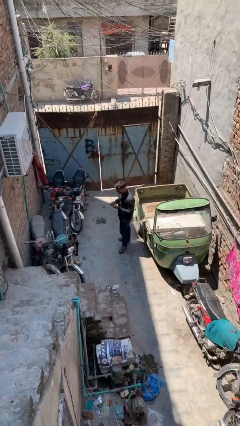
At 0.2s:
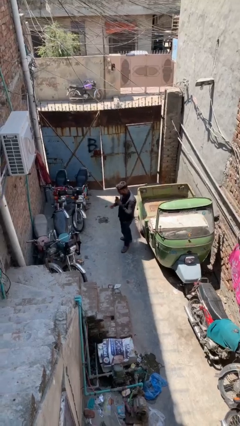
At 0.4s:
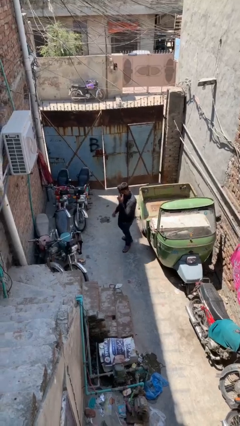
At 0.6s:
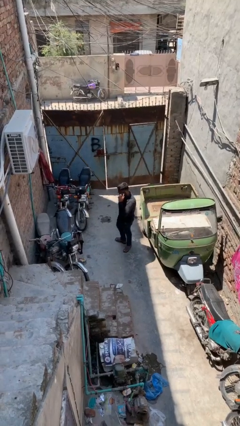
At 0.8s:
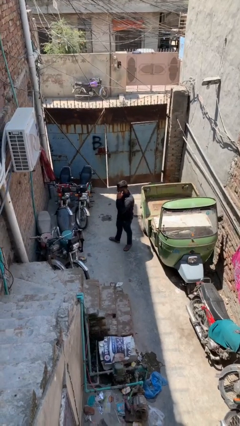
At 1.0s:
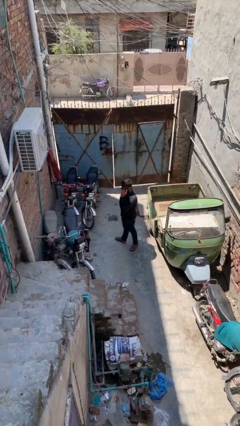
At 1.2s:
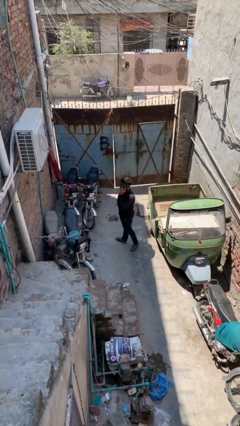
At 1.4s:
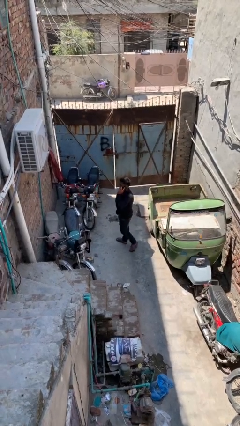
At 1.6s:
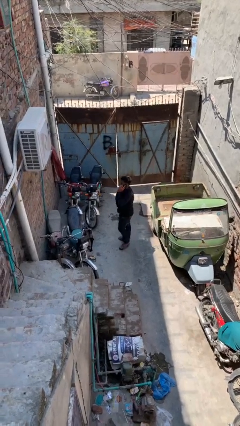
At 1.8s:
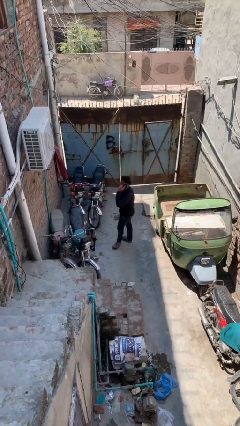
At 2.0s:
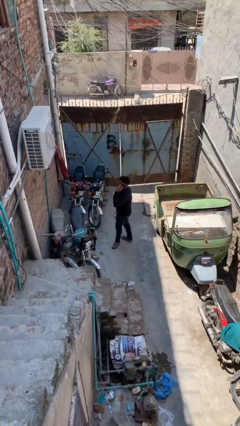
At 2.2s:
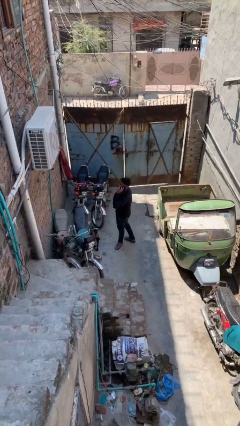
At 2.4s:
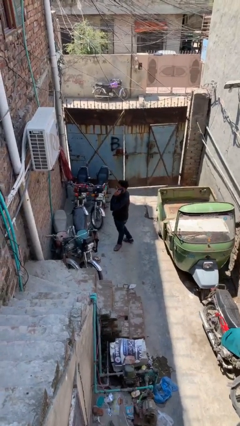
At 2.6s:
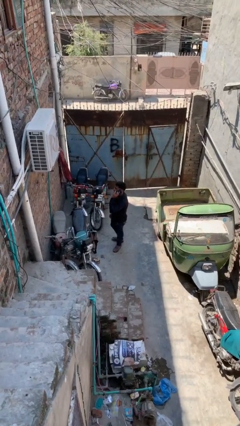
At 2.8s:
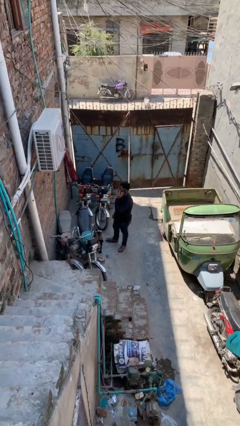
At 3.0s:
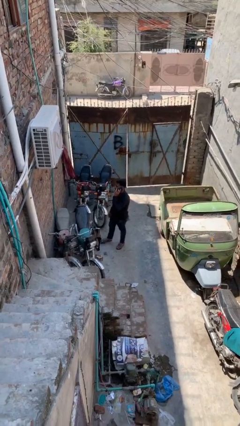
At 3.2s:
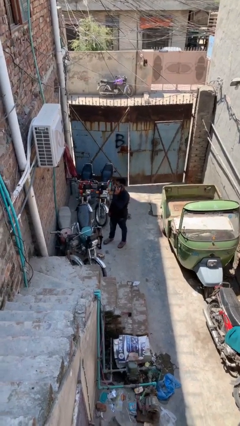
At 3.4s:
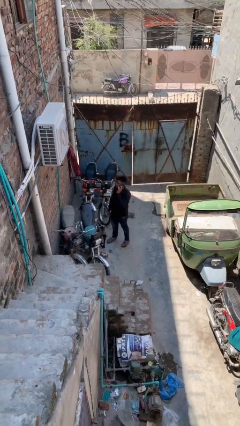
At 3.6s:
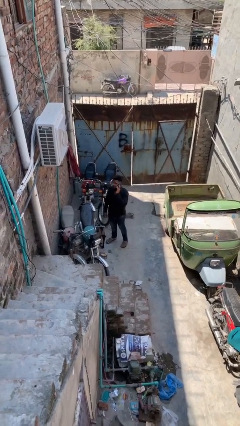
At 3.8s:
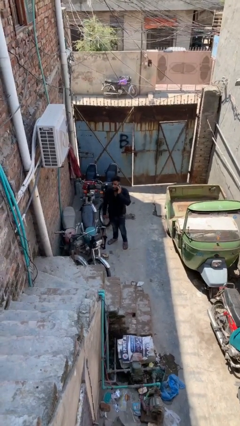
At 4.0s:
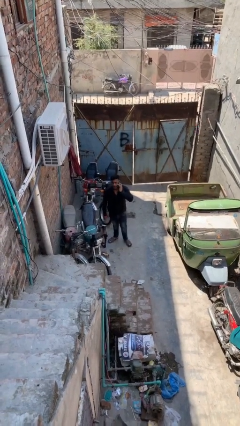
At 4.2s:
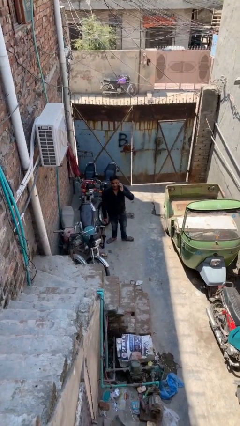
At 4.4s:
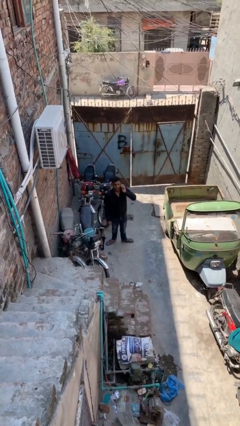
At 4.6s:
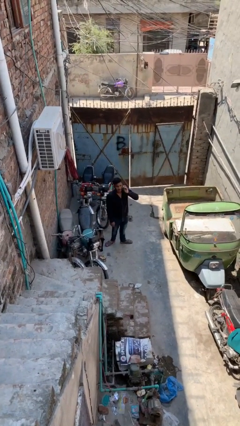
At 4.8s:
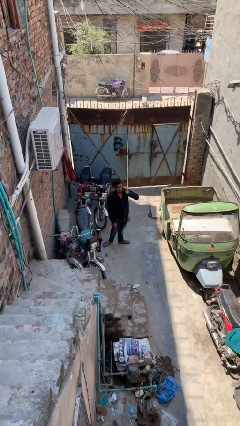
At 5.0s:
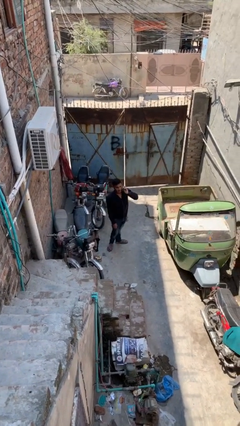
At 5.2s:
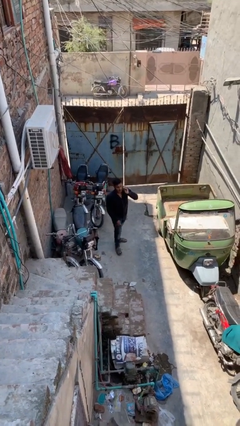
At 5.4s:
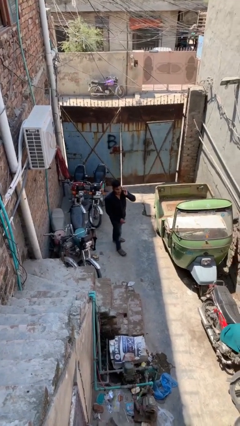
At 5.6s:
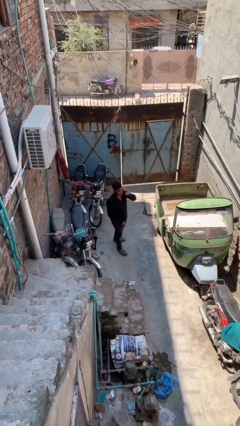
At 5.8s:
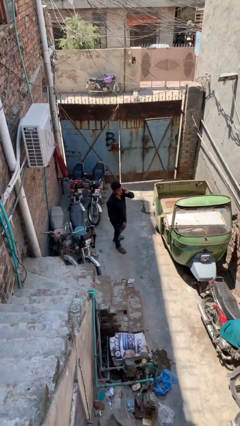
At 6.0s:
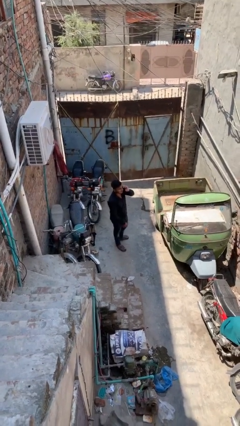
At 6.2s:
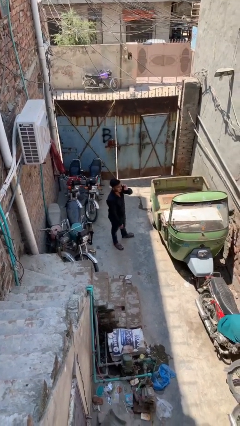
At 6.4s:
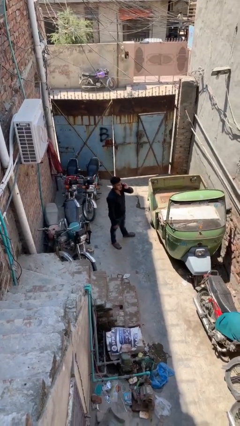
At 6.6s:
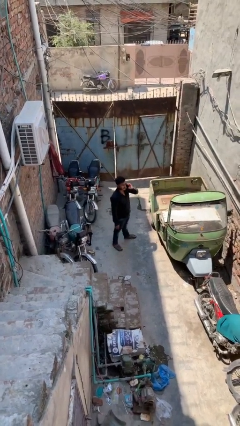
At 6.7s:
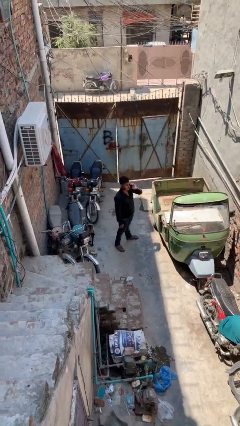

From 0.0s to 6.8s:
person talks on phone

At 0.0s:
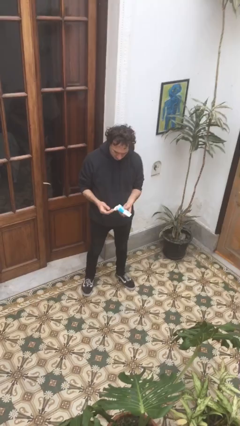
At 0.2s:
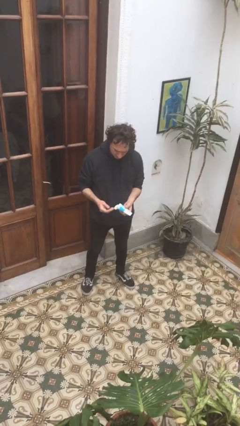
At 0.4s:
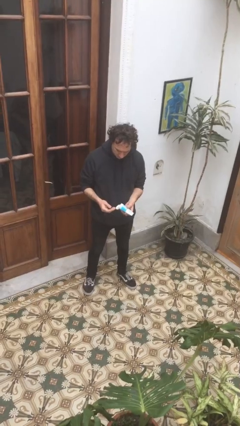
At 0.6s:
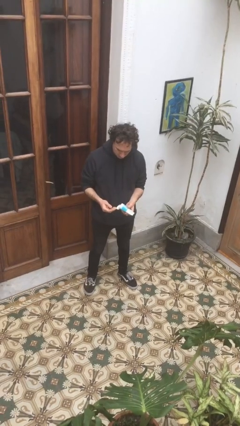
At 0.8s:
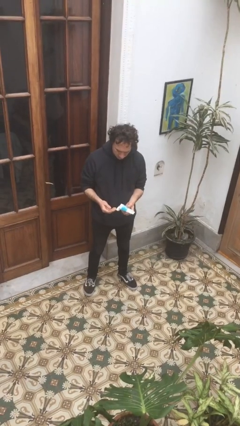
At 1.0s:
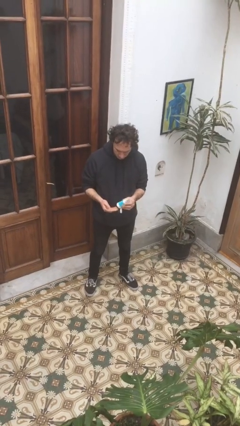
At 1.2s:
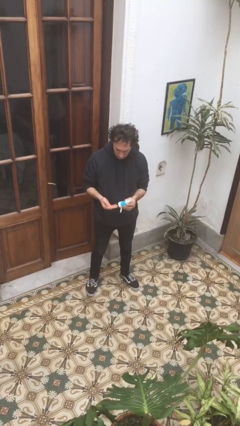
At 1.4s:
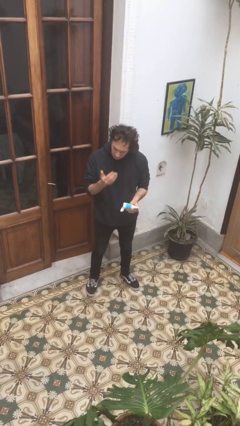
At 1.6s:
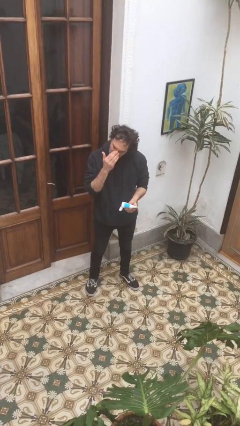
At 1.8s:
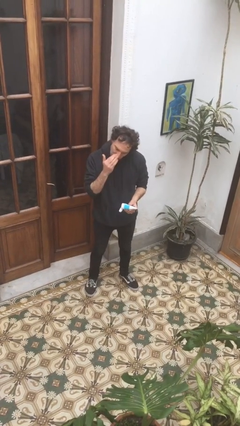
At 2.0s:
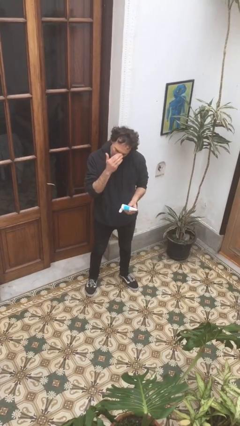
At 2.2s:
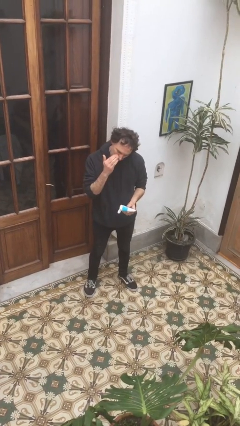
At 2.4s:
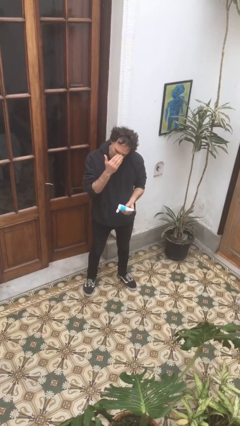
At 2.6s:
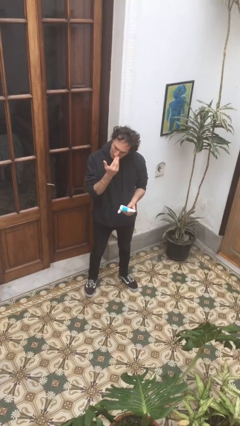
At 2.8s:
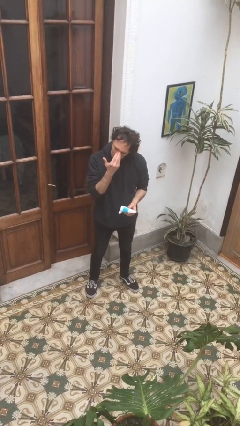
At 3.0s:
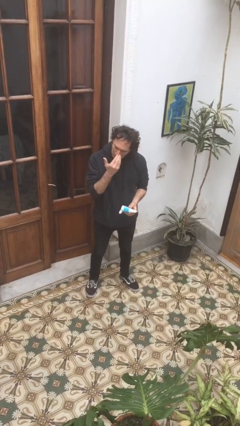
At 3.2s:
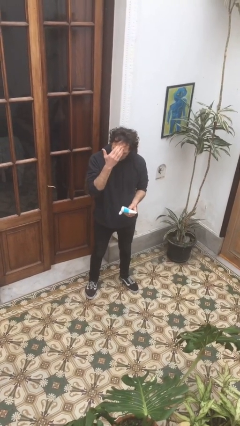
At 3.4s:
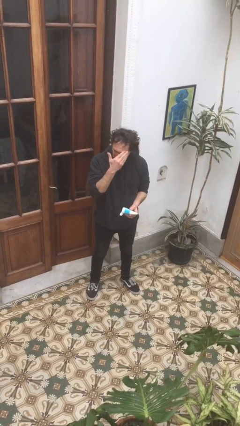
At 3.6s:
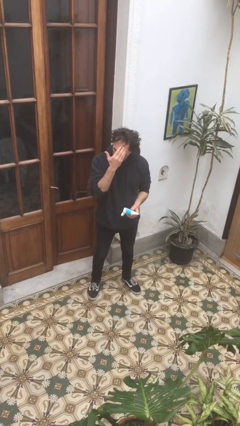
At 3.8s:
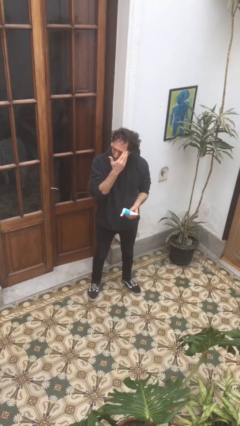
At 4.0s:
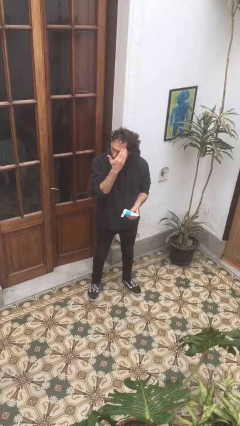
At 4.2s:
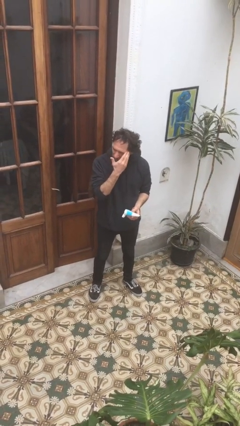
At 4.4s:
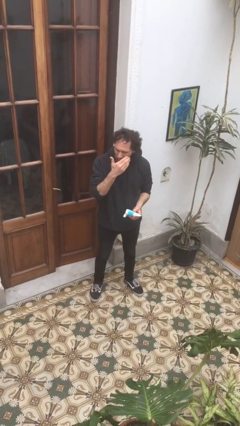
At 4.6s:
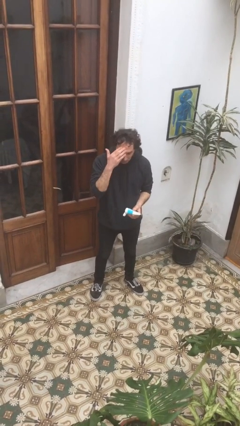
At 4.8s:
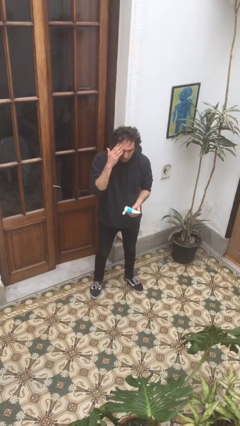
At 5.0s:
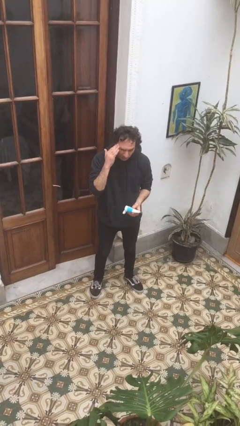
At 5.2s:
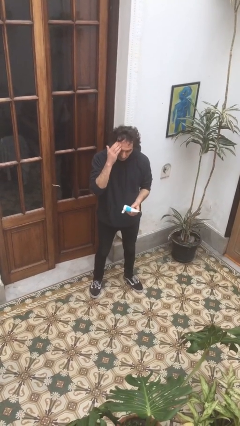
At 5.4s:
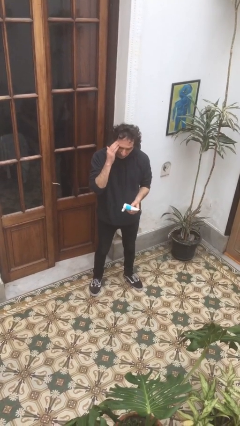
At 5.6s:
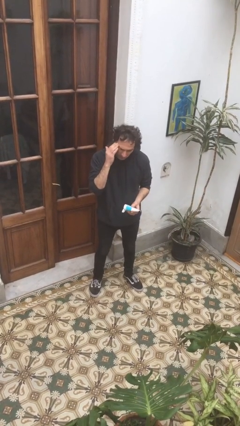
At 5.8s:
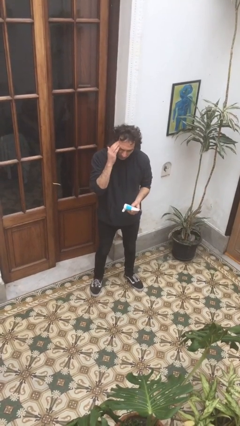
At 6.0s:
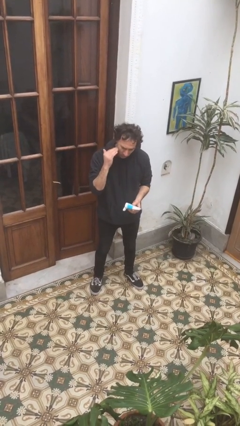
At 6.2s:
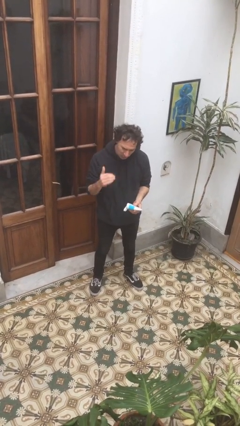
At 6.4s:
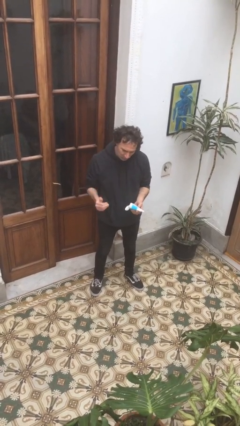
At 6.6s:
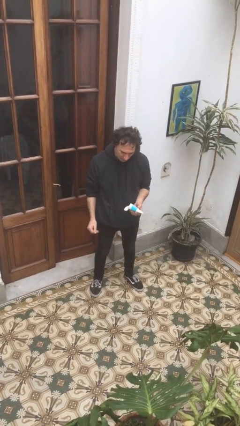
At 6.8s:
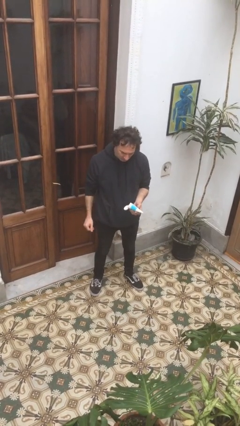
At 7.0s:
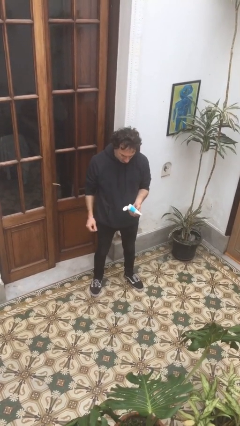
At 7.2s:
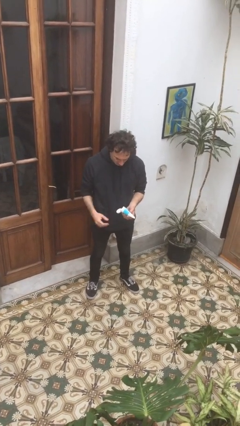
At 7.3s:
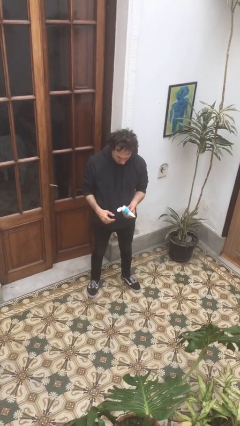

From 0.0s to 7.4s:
person applies sunscreen

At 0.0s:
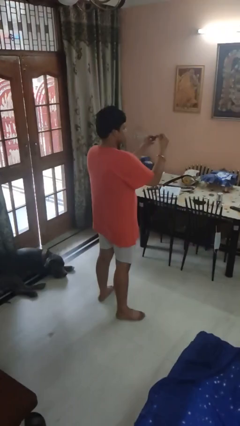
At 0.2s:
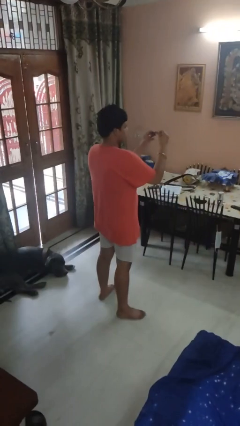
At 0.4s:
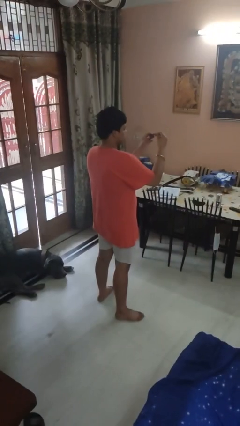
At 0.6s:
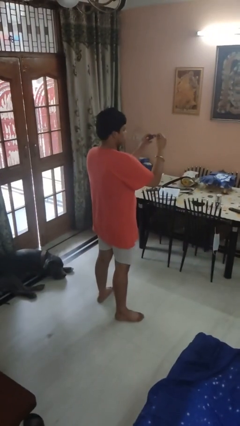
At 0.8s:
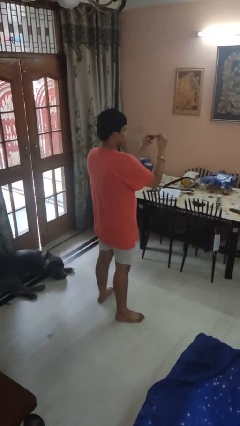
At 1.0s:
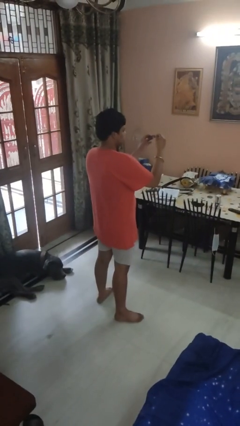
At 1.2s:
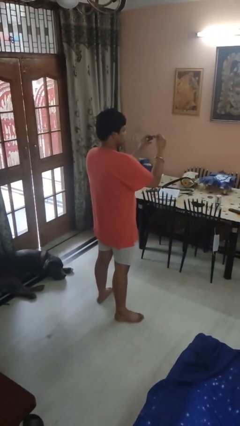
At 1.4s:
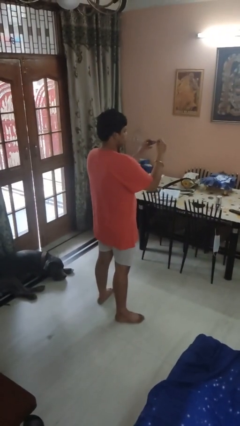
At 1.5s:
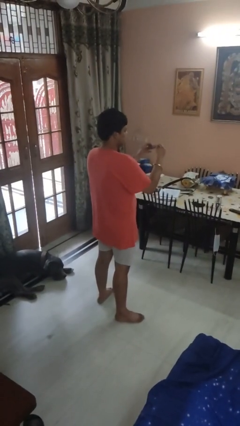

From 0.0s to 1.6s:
person clips fingernails

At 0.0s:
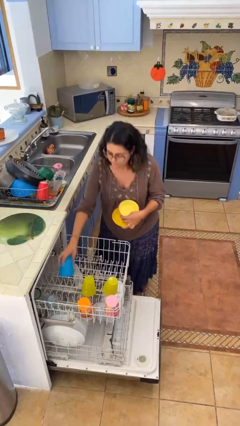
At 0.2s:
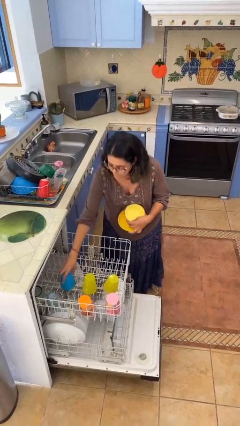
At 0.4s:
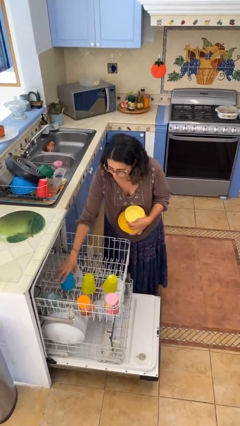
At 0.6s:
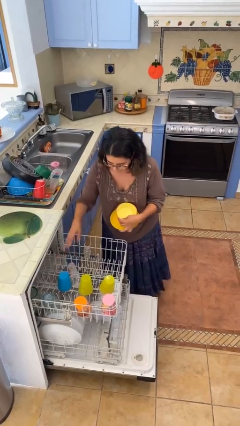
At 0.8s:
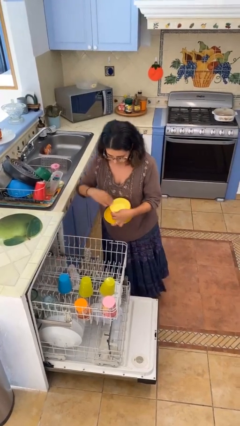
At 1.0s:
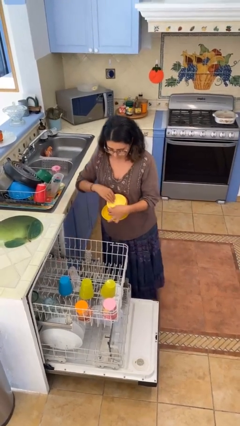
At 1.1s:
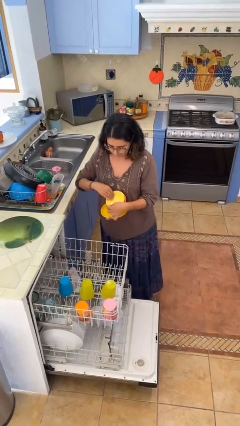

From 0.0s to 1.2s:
person loads dishwasher

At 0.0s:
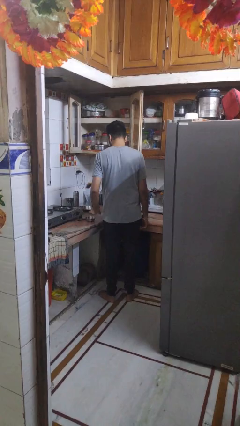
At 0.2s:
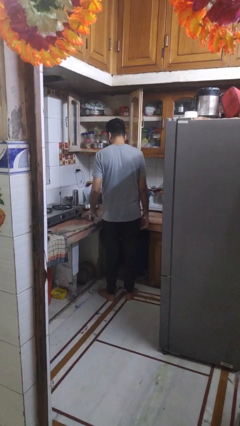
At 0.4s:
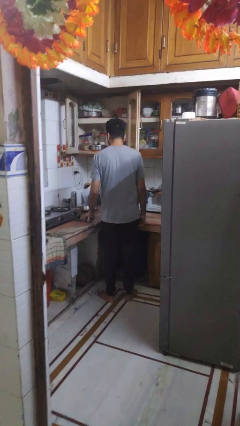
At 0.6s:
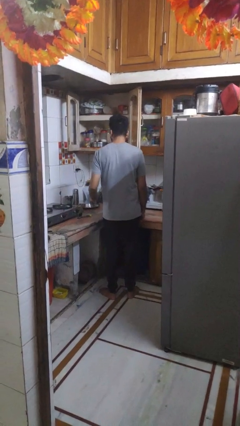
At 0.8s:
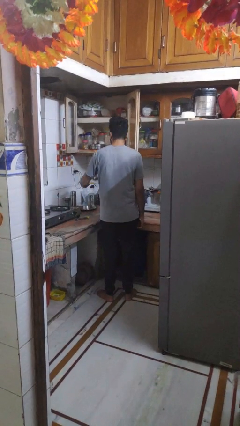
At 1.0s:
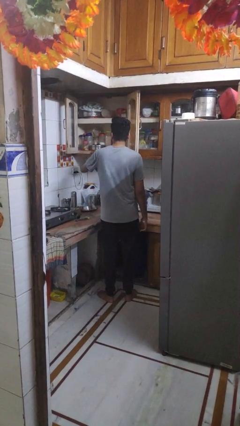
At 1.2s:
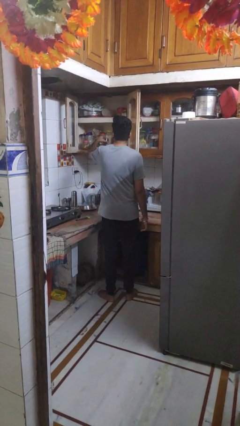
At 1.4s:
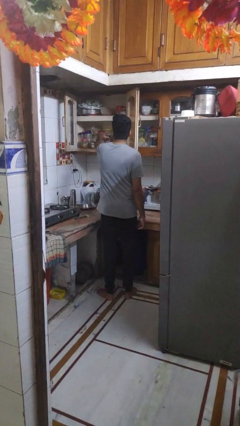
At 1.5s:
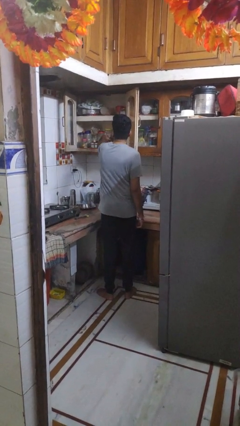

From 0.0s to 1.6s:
person puts object in cabinet
